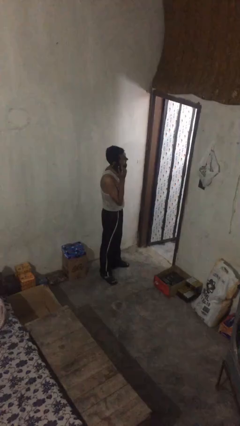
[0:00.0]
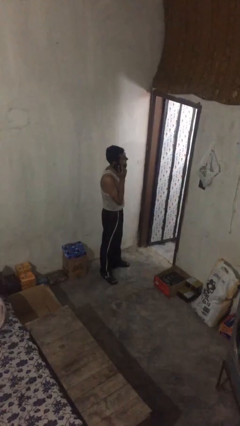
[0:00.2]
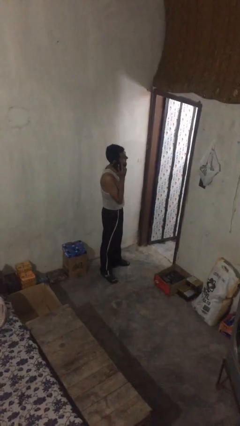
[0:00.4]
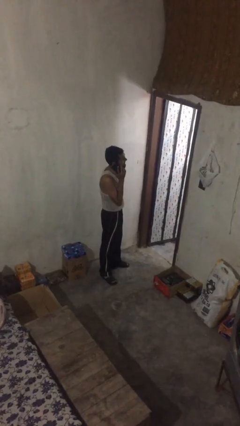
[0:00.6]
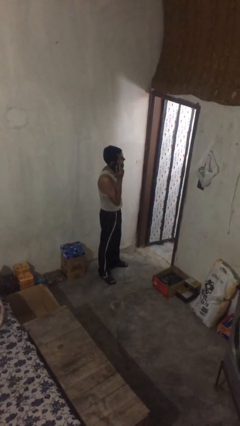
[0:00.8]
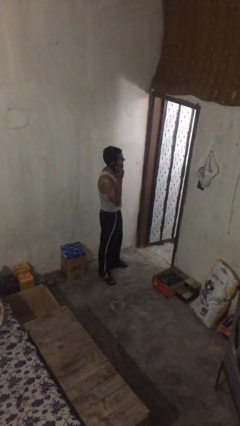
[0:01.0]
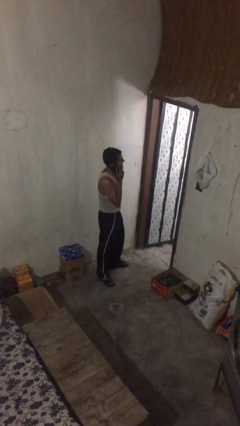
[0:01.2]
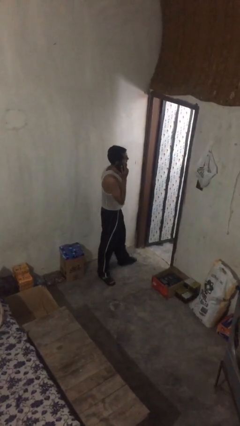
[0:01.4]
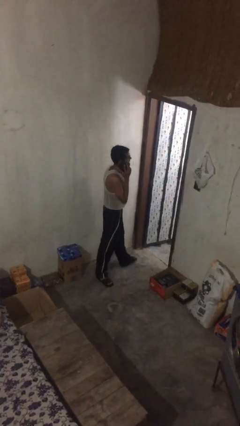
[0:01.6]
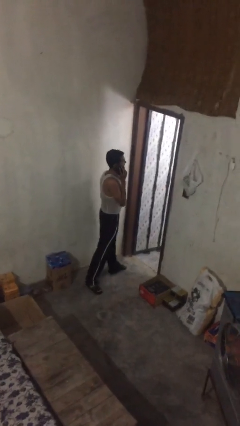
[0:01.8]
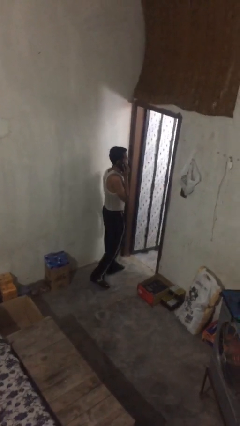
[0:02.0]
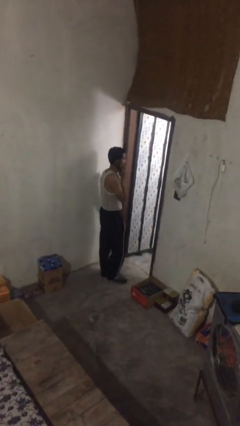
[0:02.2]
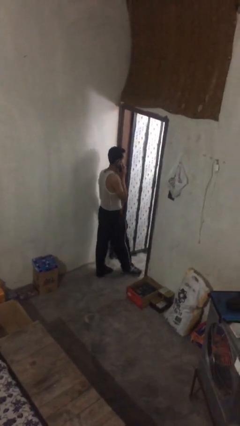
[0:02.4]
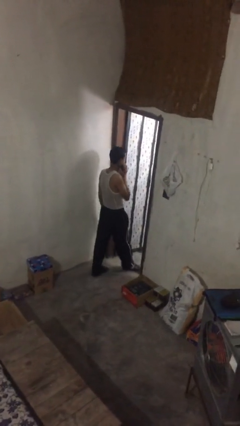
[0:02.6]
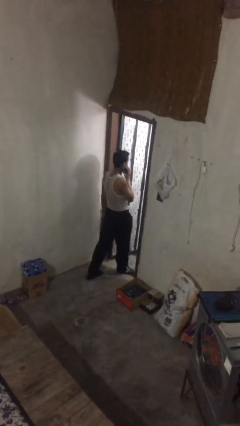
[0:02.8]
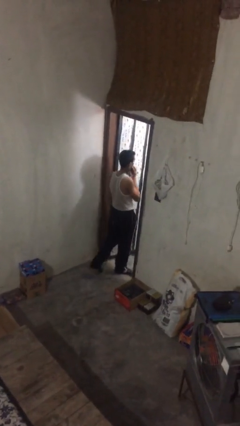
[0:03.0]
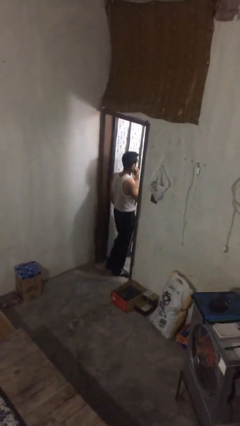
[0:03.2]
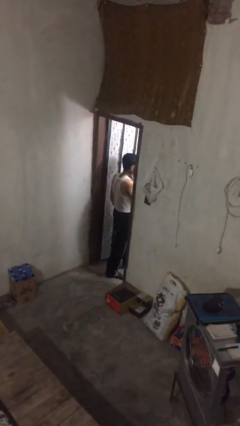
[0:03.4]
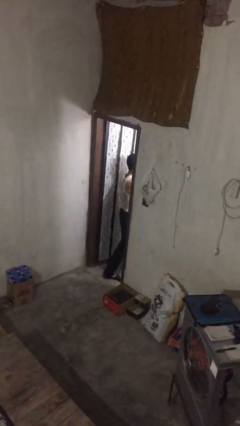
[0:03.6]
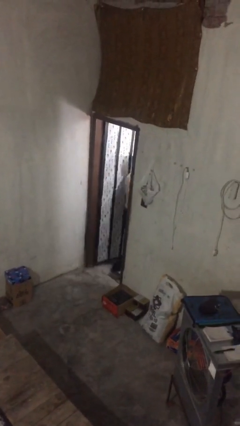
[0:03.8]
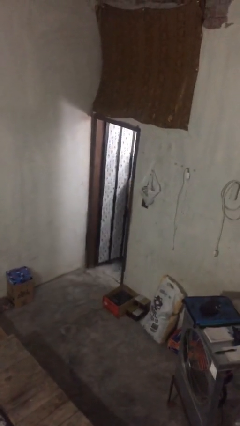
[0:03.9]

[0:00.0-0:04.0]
person exits scene through structure

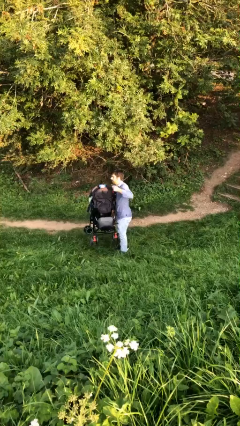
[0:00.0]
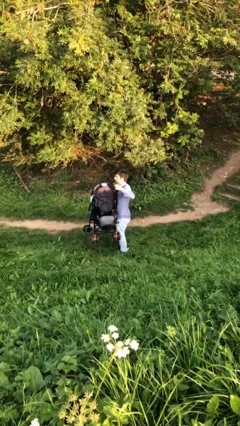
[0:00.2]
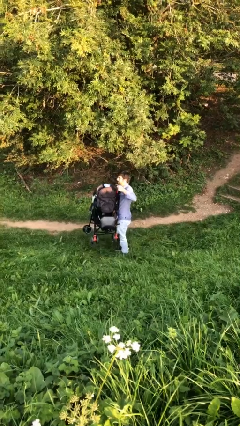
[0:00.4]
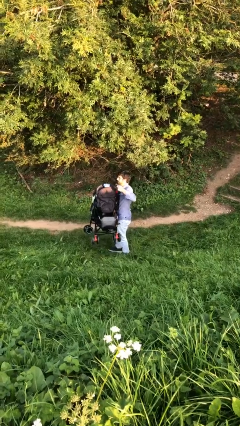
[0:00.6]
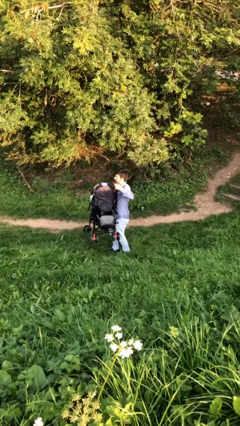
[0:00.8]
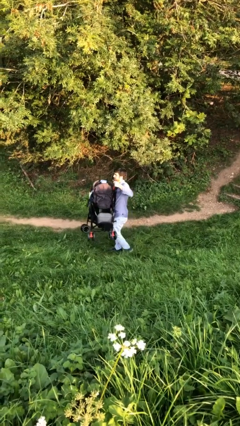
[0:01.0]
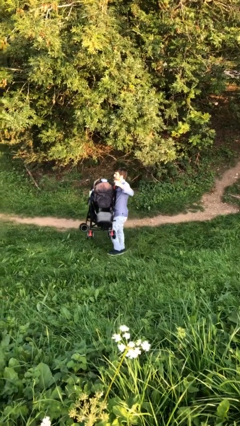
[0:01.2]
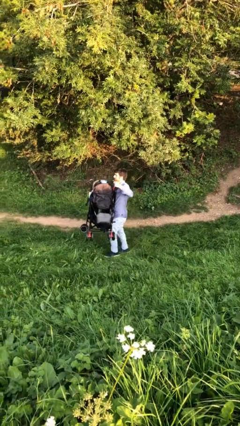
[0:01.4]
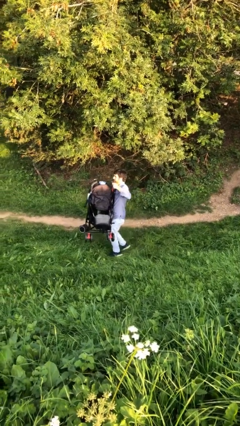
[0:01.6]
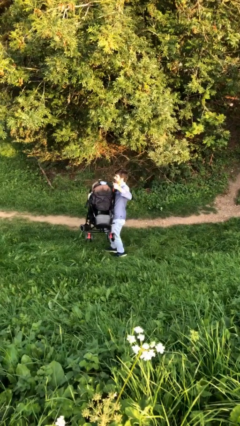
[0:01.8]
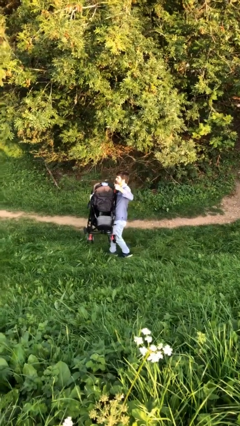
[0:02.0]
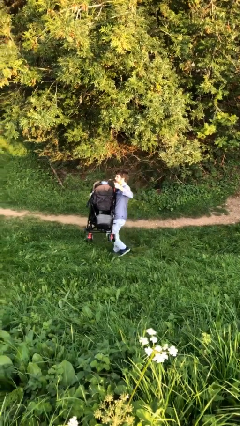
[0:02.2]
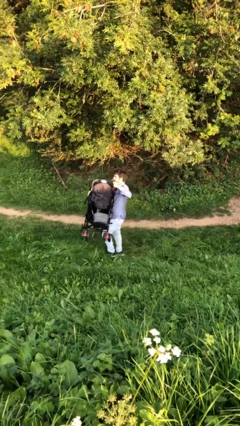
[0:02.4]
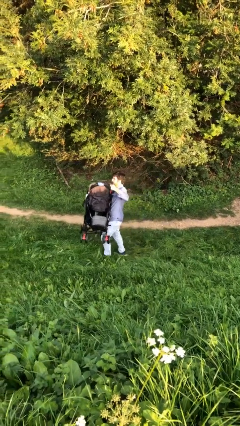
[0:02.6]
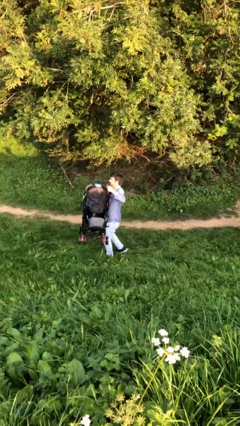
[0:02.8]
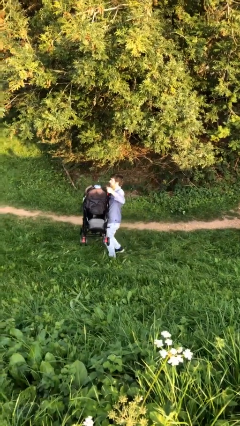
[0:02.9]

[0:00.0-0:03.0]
person carries heavy object

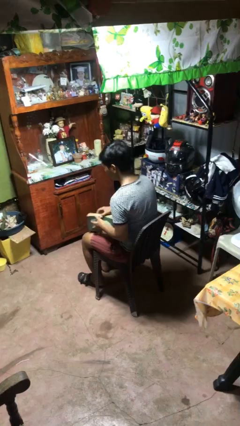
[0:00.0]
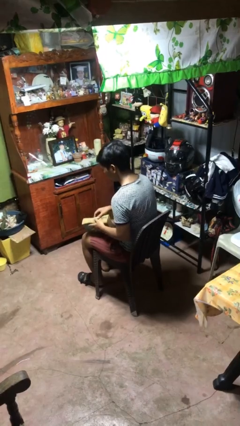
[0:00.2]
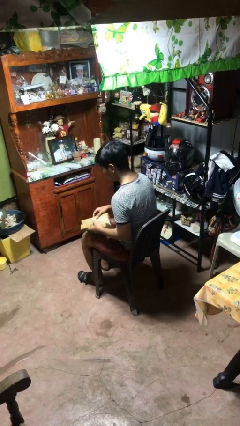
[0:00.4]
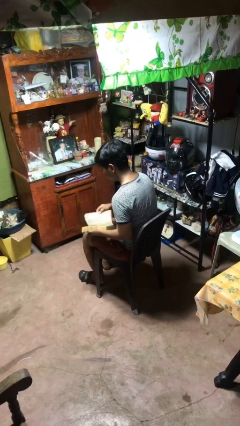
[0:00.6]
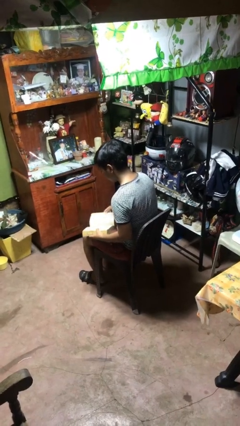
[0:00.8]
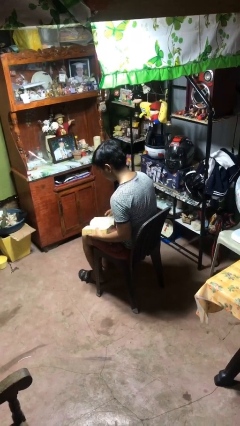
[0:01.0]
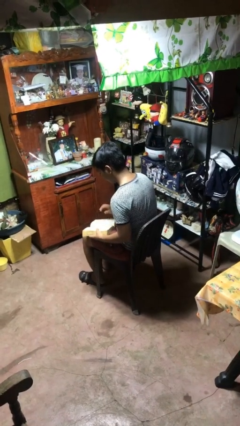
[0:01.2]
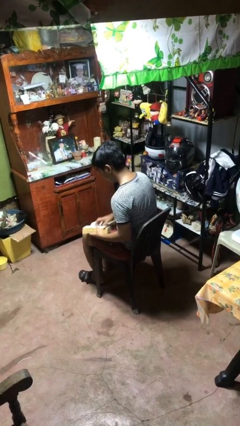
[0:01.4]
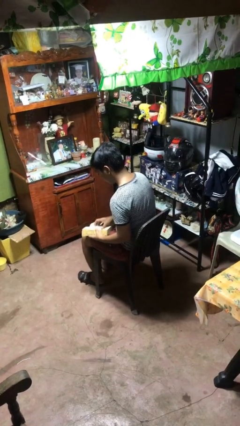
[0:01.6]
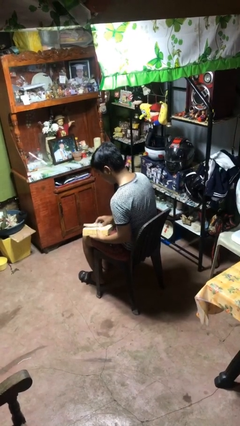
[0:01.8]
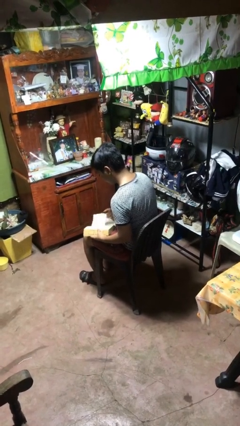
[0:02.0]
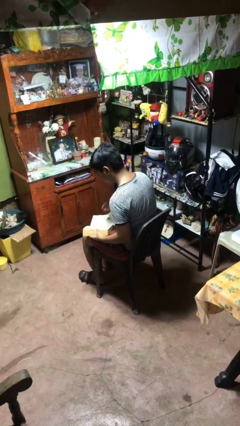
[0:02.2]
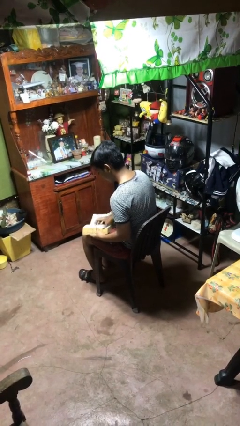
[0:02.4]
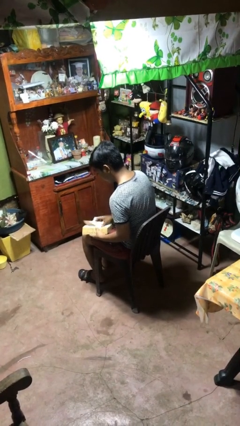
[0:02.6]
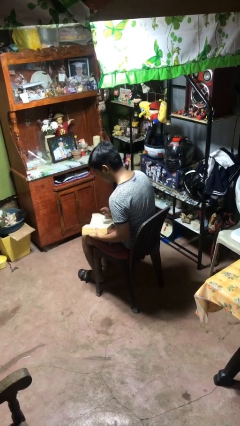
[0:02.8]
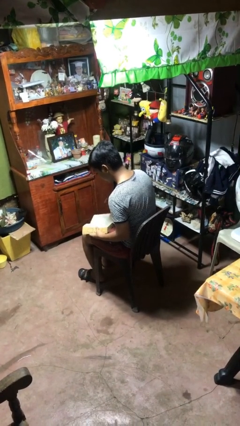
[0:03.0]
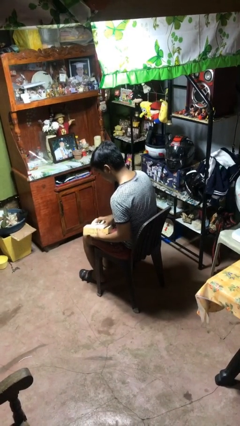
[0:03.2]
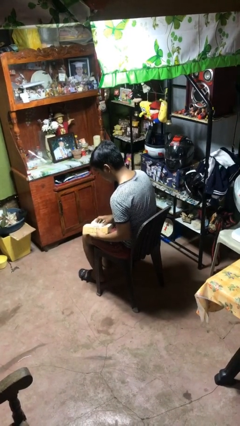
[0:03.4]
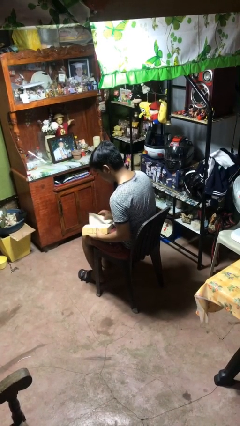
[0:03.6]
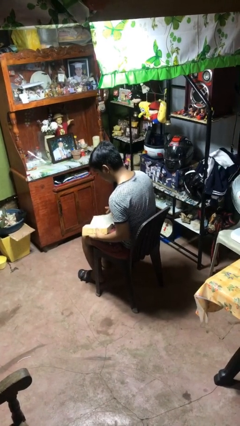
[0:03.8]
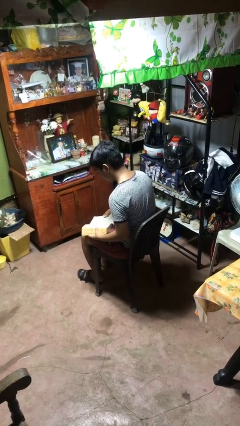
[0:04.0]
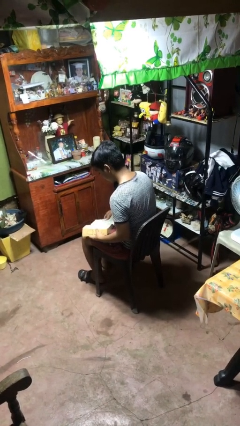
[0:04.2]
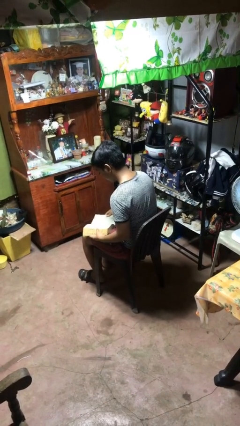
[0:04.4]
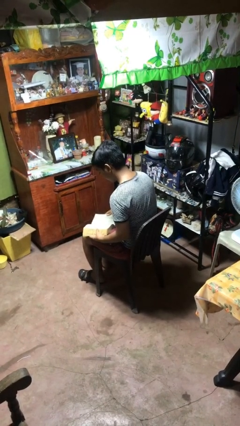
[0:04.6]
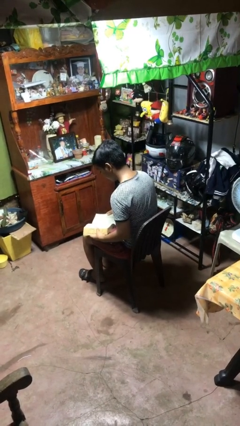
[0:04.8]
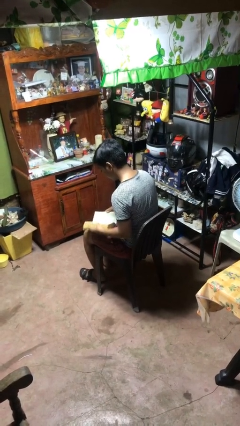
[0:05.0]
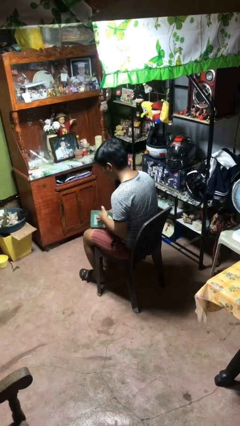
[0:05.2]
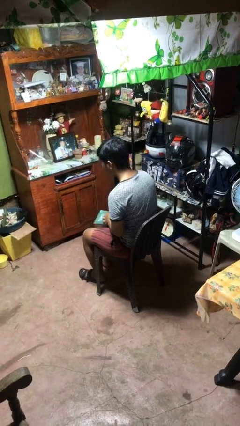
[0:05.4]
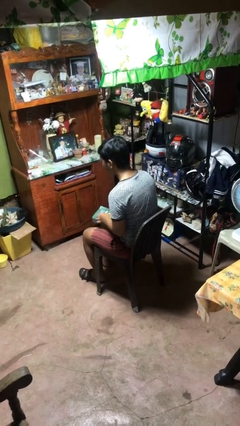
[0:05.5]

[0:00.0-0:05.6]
person reads book

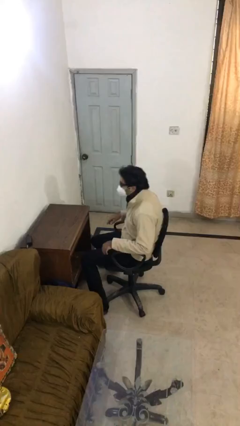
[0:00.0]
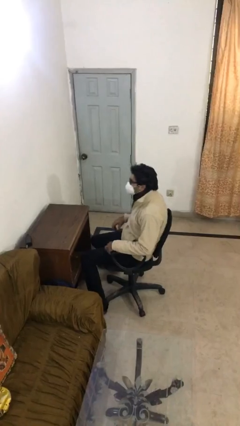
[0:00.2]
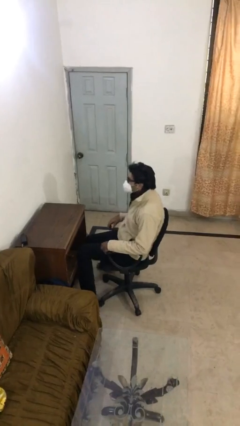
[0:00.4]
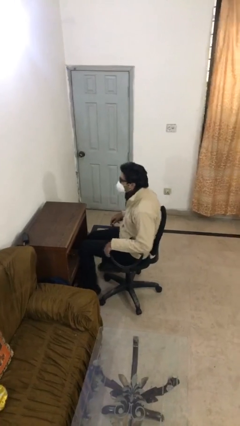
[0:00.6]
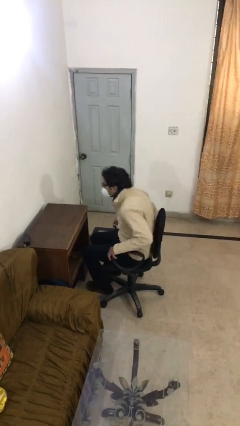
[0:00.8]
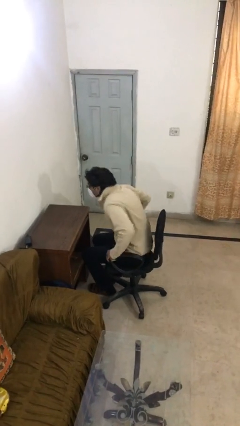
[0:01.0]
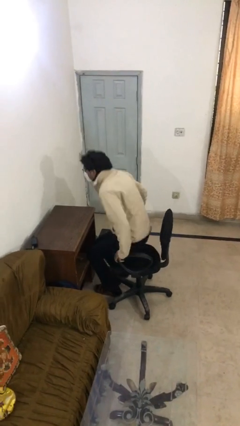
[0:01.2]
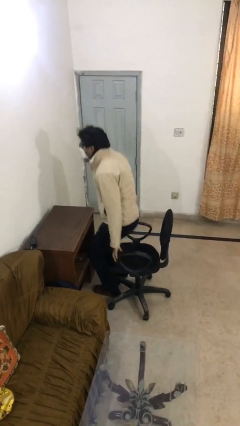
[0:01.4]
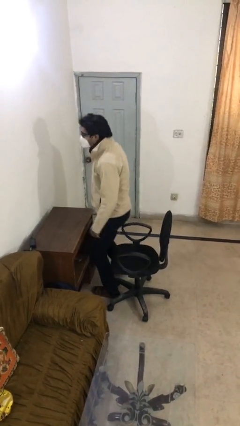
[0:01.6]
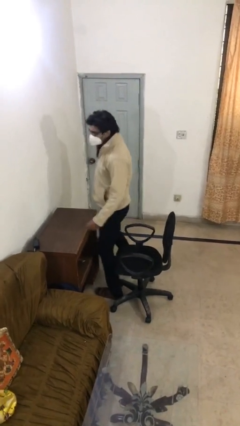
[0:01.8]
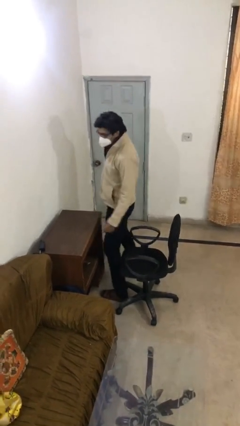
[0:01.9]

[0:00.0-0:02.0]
person stands up

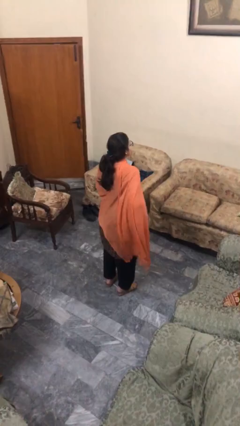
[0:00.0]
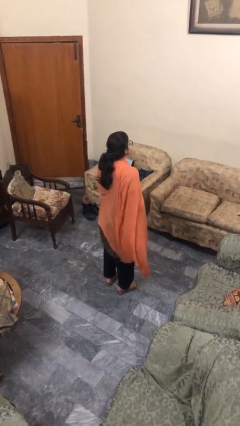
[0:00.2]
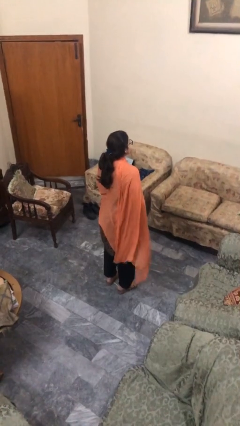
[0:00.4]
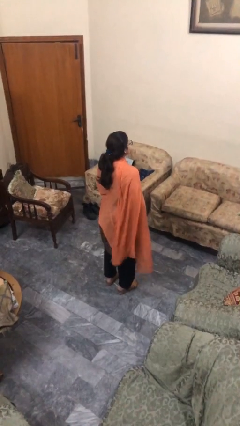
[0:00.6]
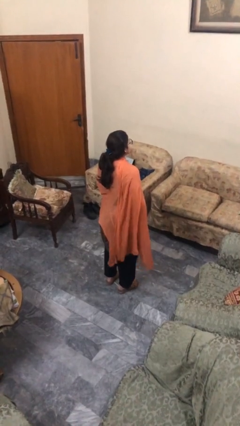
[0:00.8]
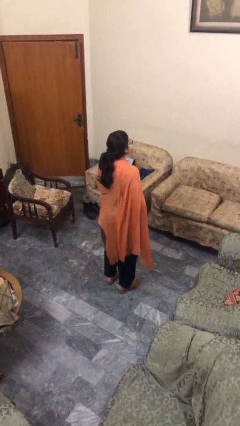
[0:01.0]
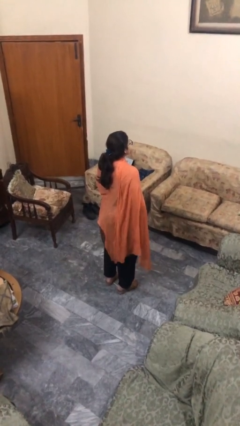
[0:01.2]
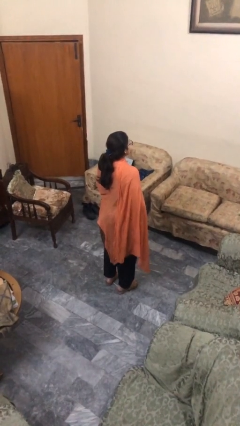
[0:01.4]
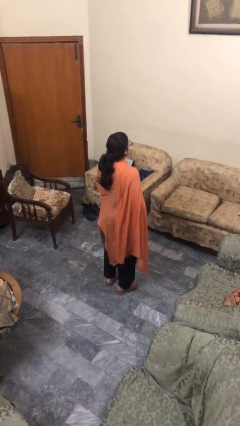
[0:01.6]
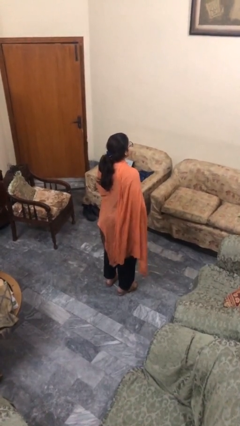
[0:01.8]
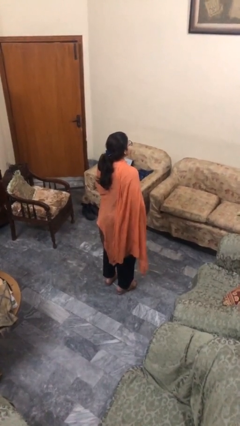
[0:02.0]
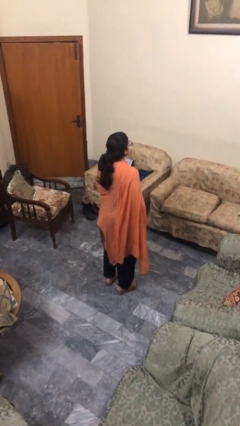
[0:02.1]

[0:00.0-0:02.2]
person puts phone into pocket

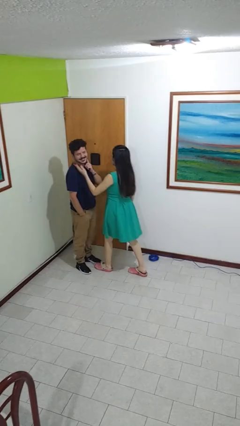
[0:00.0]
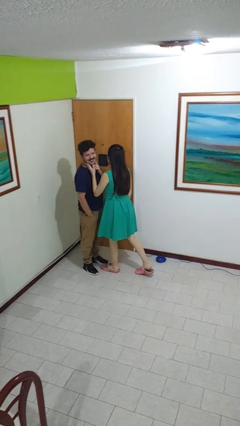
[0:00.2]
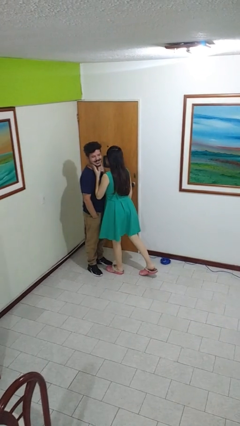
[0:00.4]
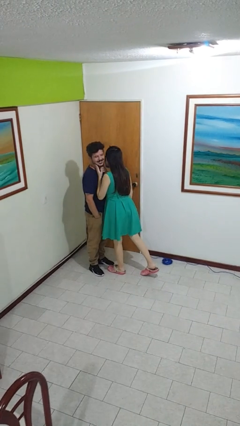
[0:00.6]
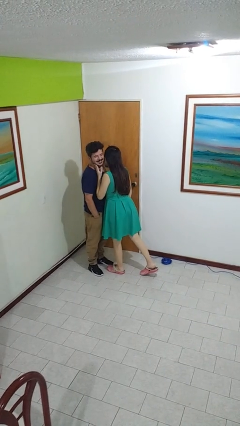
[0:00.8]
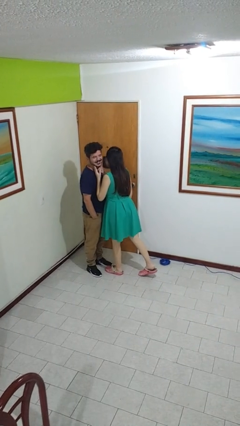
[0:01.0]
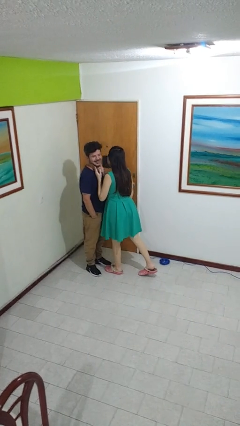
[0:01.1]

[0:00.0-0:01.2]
person kisses cheek of person
